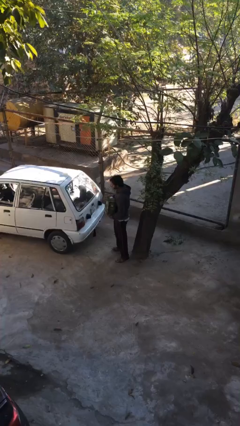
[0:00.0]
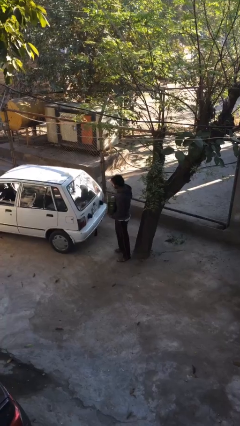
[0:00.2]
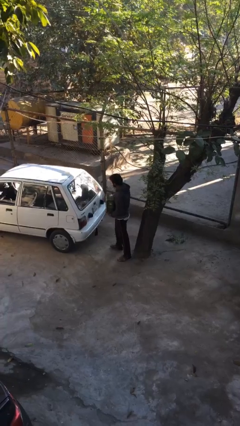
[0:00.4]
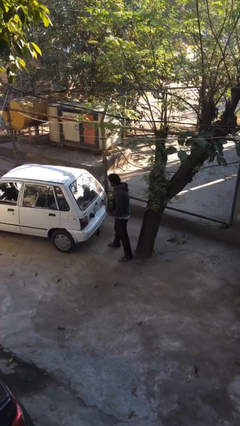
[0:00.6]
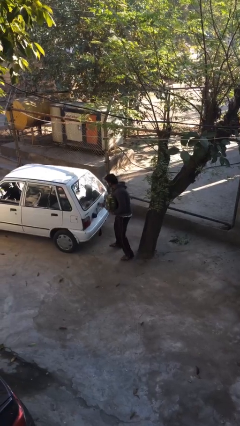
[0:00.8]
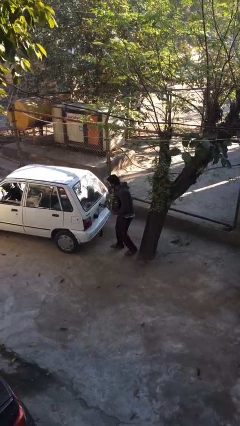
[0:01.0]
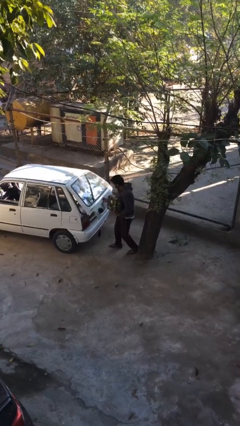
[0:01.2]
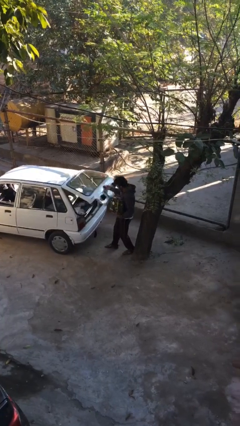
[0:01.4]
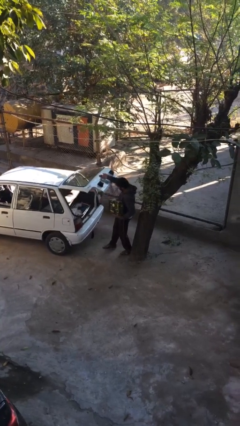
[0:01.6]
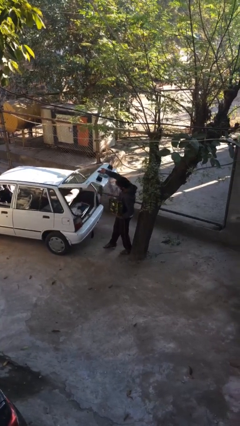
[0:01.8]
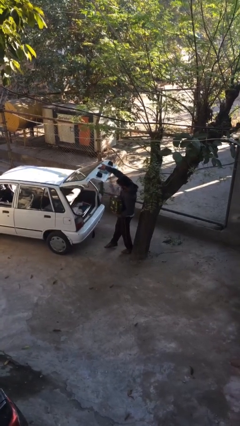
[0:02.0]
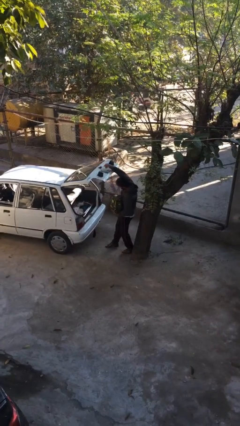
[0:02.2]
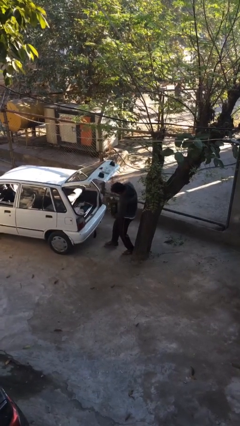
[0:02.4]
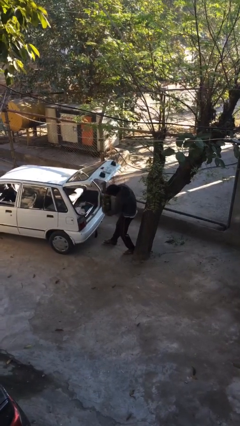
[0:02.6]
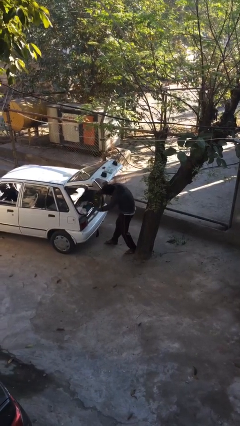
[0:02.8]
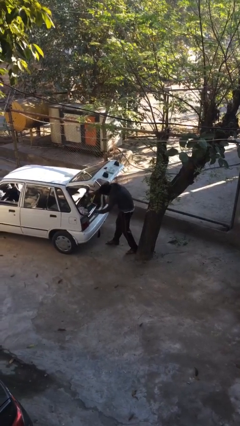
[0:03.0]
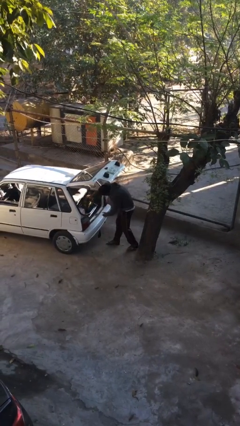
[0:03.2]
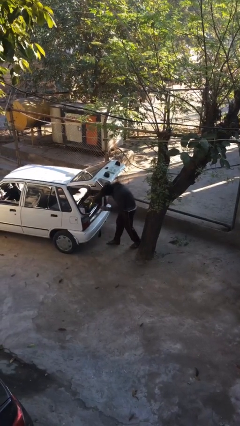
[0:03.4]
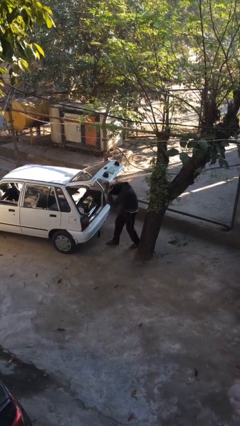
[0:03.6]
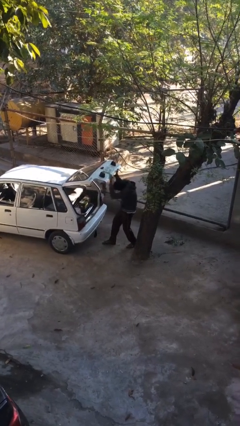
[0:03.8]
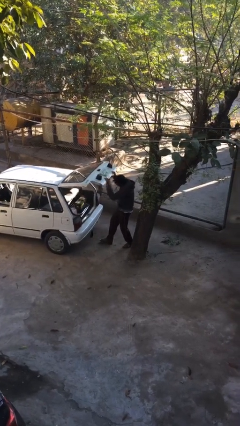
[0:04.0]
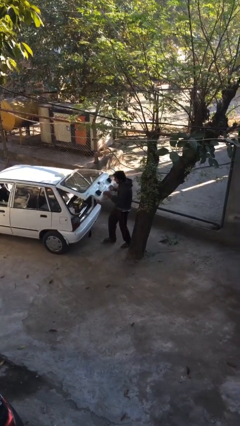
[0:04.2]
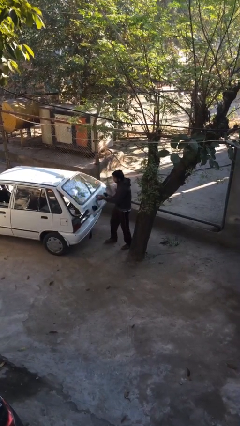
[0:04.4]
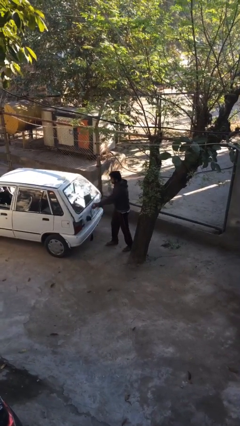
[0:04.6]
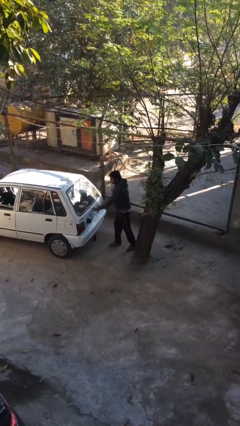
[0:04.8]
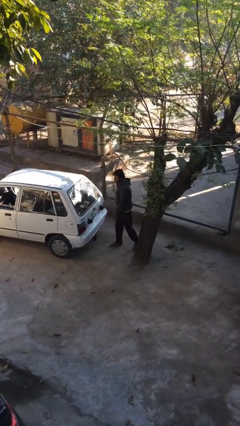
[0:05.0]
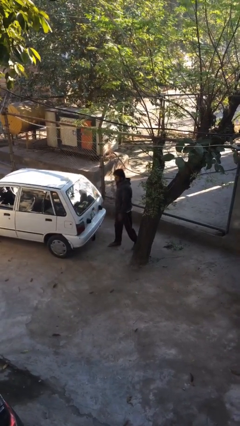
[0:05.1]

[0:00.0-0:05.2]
person loads car

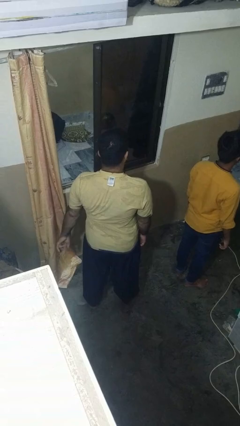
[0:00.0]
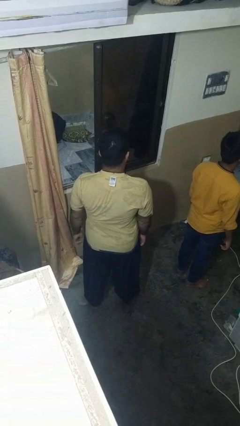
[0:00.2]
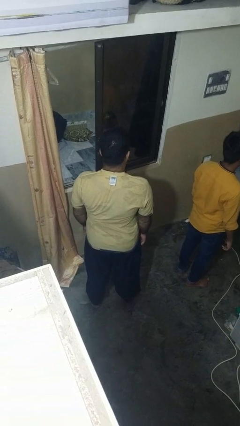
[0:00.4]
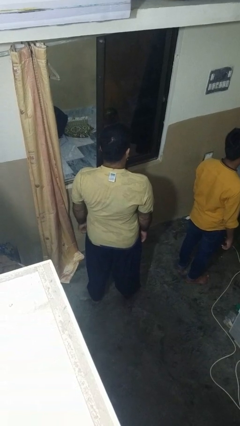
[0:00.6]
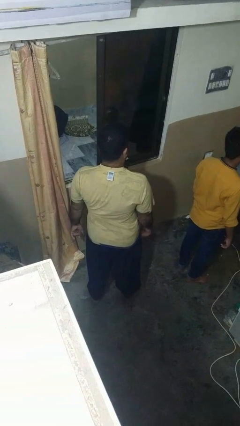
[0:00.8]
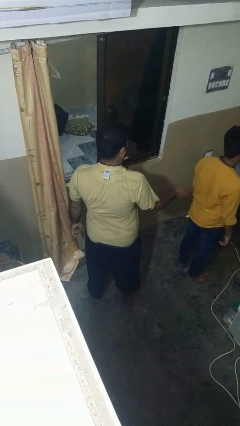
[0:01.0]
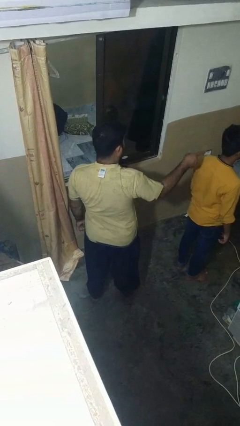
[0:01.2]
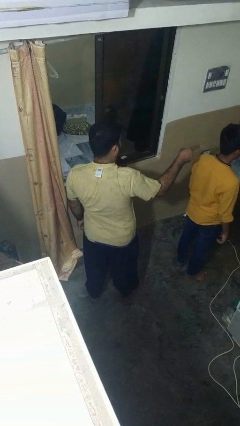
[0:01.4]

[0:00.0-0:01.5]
person points at person

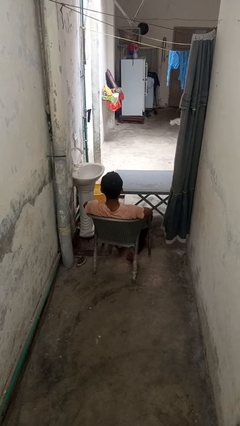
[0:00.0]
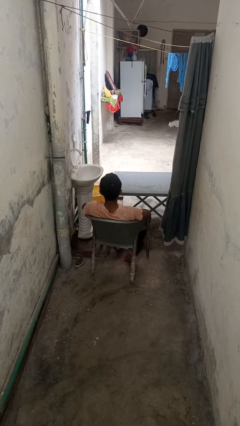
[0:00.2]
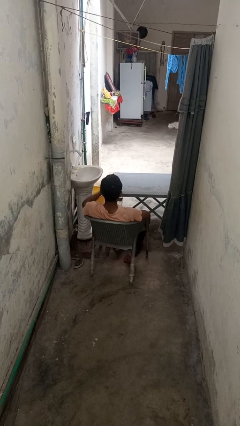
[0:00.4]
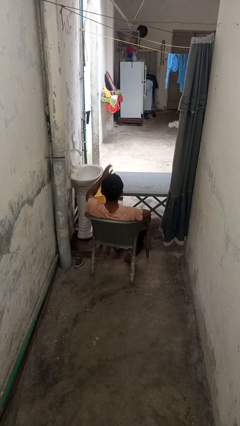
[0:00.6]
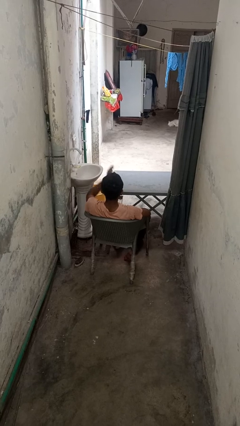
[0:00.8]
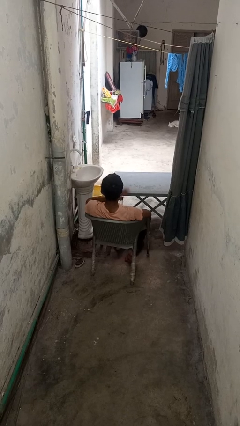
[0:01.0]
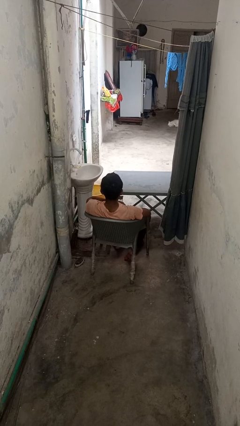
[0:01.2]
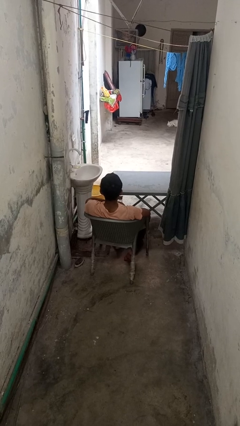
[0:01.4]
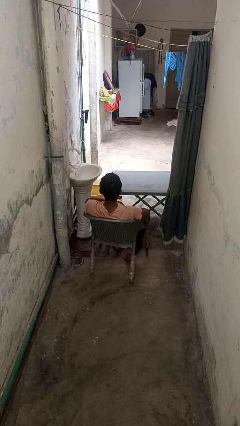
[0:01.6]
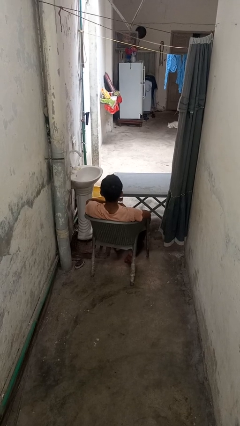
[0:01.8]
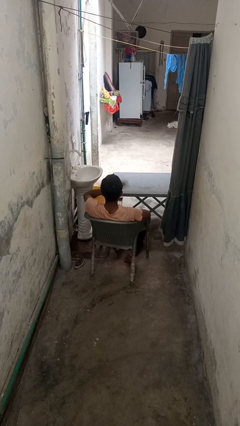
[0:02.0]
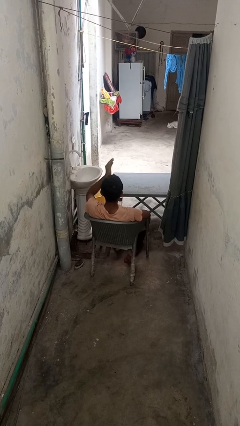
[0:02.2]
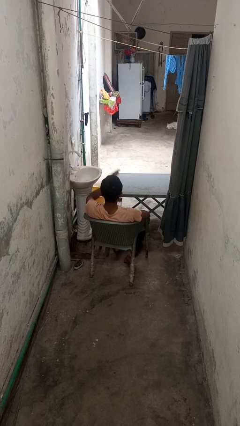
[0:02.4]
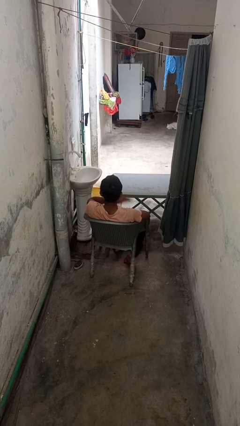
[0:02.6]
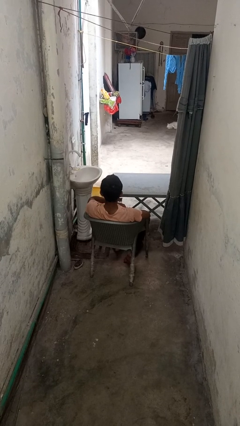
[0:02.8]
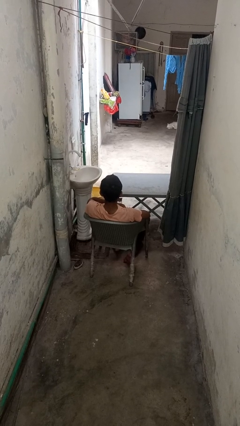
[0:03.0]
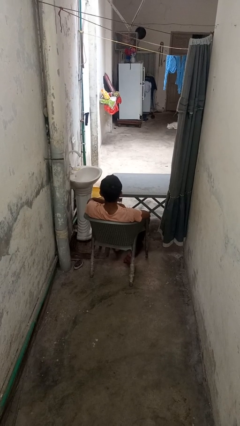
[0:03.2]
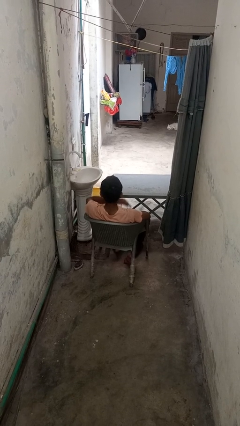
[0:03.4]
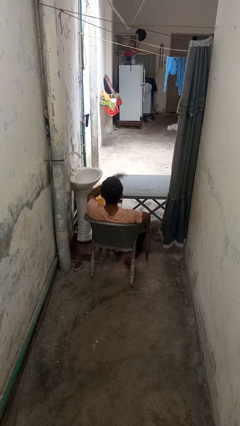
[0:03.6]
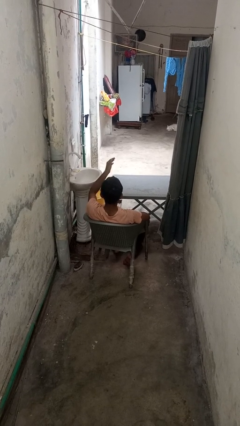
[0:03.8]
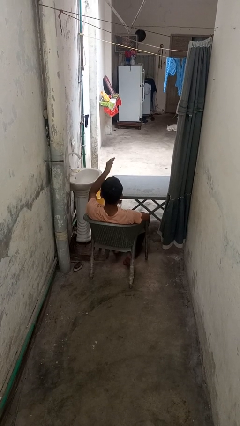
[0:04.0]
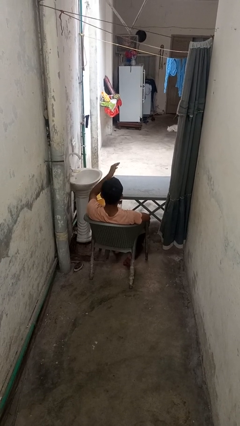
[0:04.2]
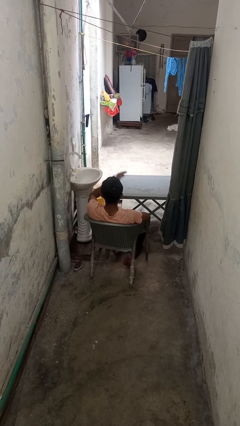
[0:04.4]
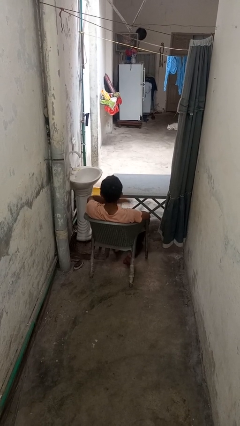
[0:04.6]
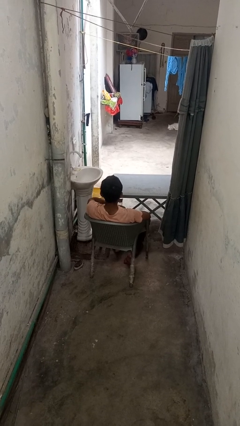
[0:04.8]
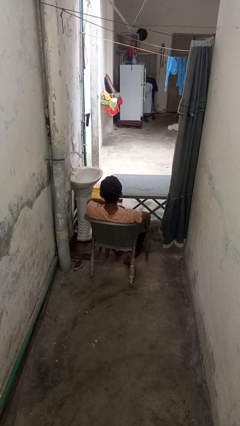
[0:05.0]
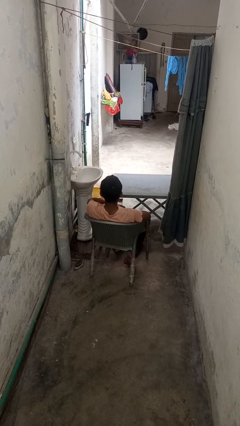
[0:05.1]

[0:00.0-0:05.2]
person drums on chest

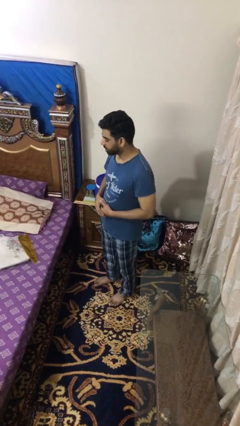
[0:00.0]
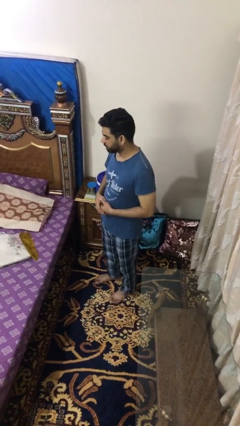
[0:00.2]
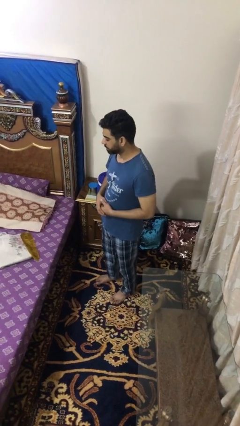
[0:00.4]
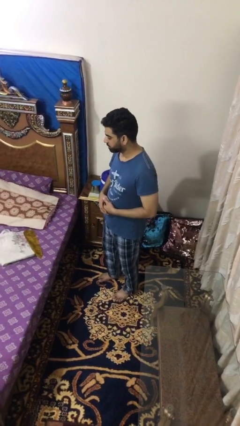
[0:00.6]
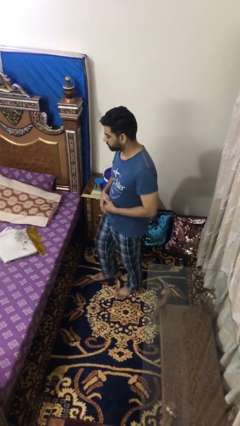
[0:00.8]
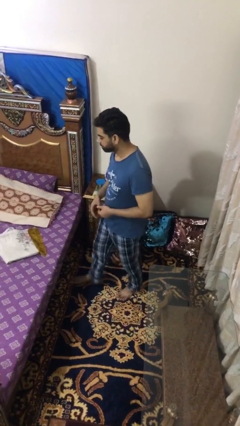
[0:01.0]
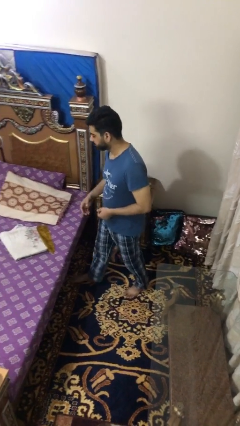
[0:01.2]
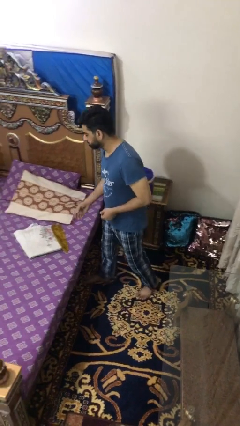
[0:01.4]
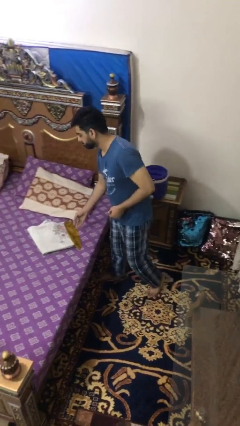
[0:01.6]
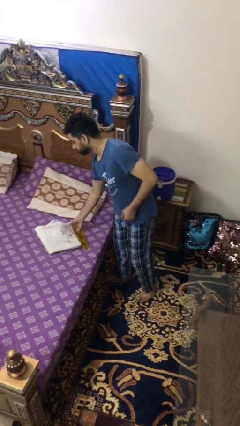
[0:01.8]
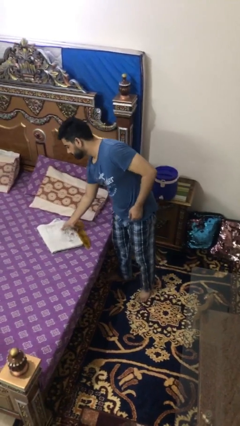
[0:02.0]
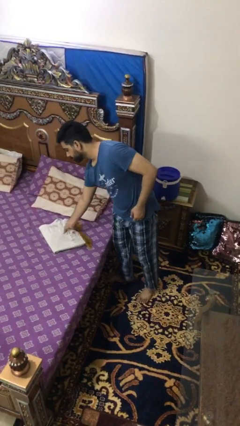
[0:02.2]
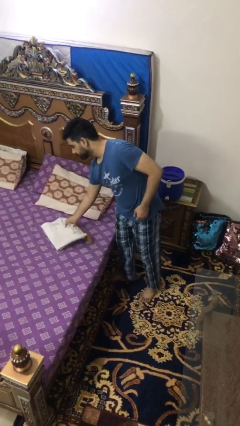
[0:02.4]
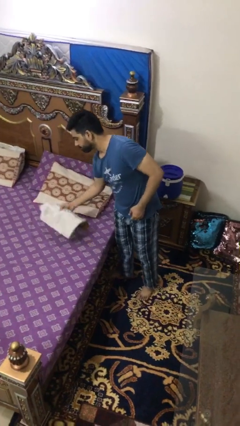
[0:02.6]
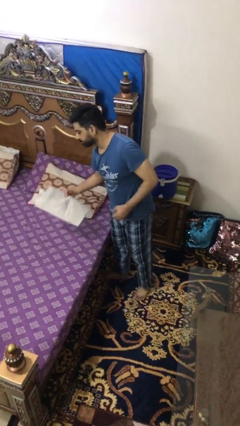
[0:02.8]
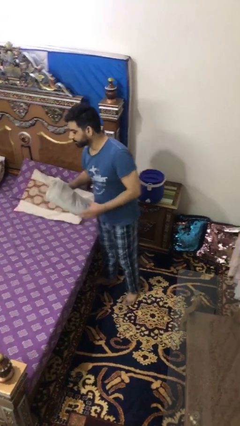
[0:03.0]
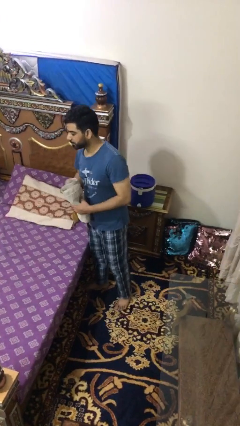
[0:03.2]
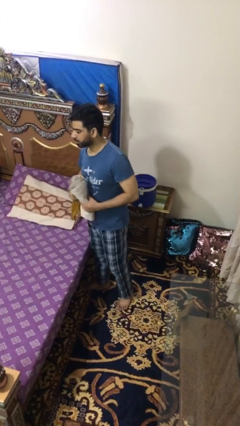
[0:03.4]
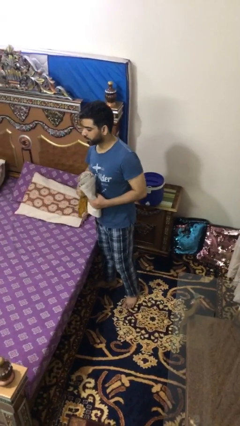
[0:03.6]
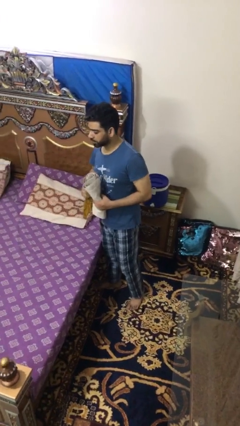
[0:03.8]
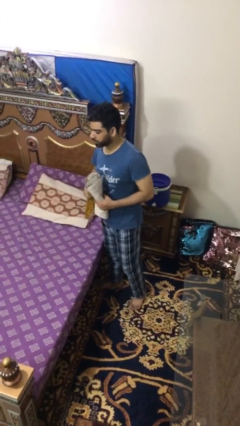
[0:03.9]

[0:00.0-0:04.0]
person picks up object from bed

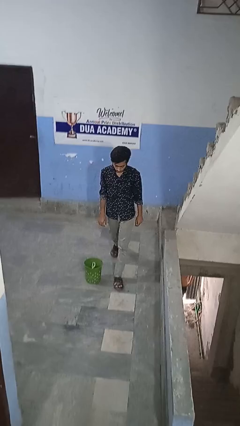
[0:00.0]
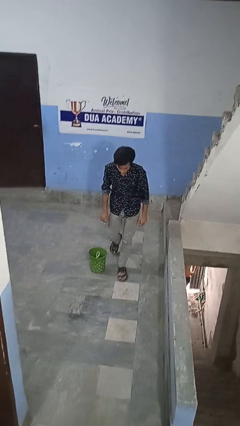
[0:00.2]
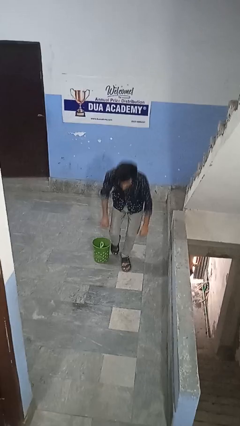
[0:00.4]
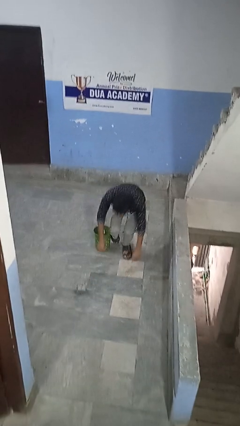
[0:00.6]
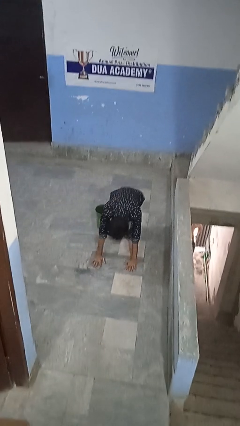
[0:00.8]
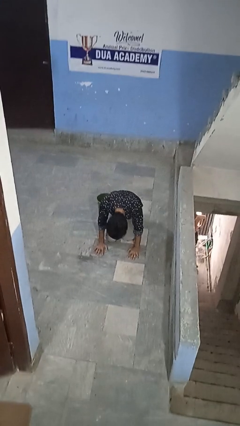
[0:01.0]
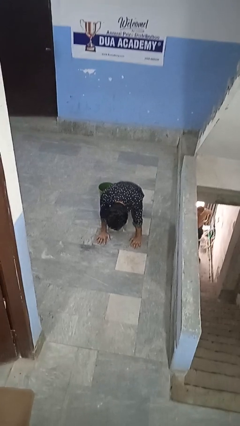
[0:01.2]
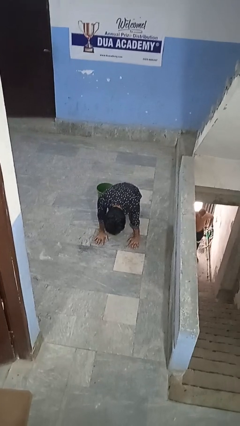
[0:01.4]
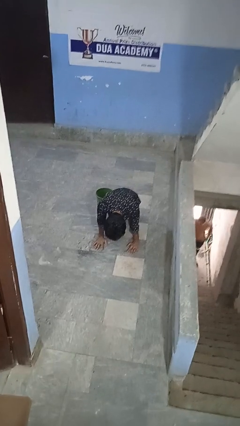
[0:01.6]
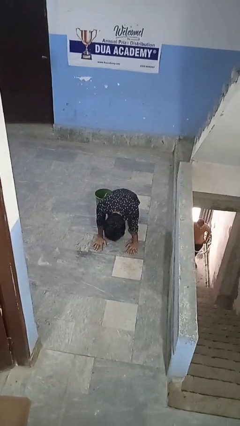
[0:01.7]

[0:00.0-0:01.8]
person trips on object on floor

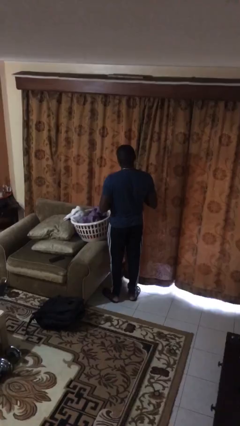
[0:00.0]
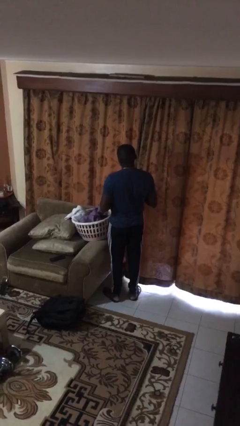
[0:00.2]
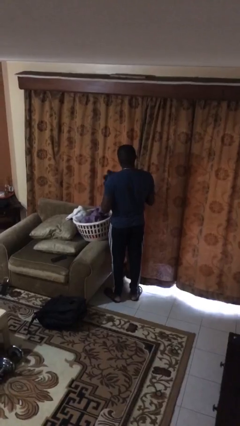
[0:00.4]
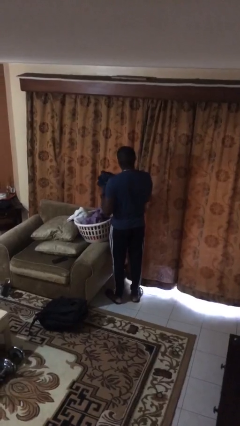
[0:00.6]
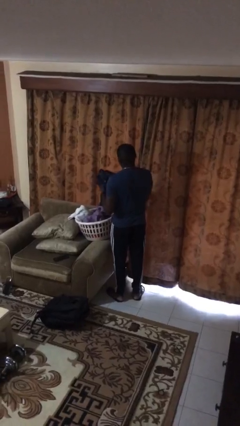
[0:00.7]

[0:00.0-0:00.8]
person puts object into basket
